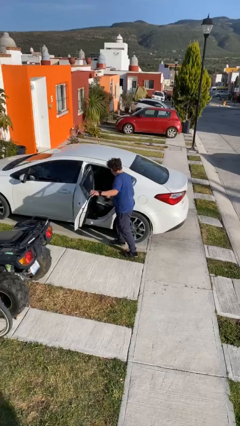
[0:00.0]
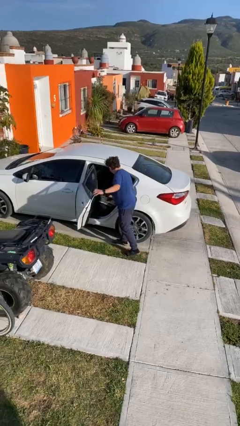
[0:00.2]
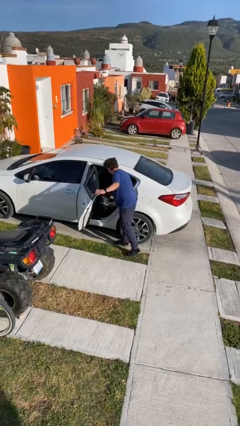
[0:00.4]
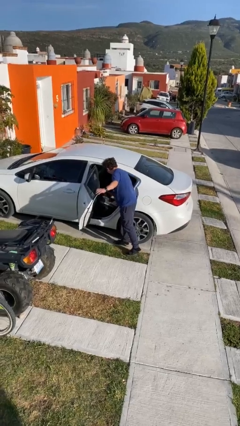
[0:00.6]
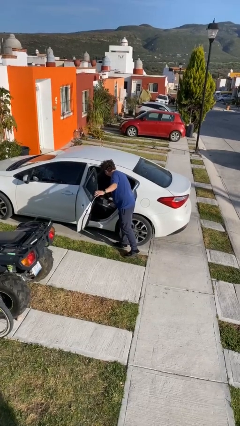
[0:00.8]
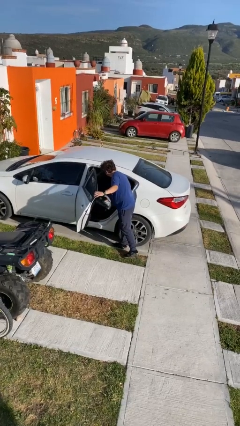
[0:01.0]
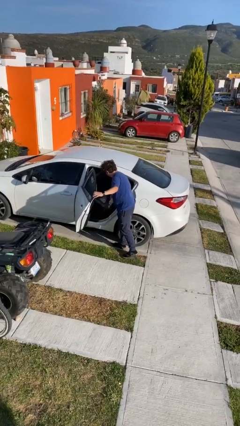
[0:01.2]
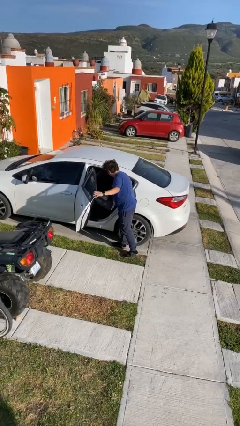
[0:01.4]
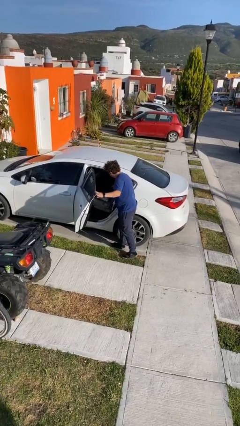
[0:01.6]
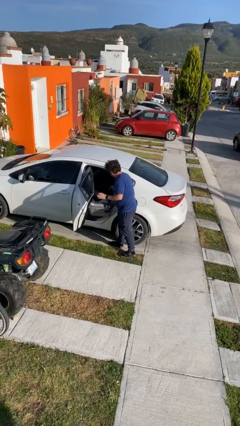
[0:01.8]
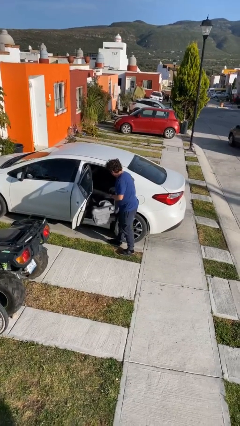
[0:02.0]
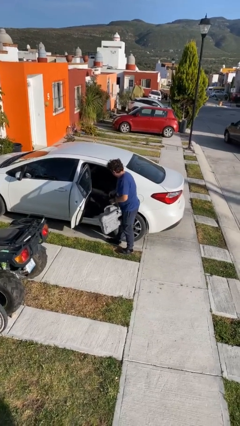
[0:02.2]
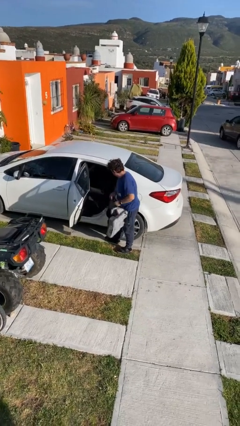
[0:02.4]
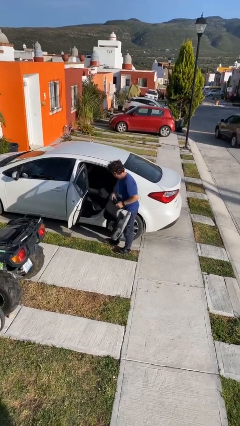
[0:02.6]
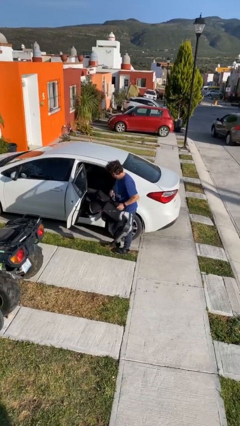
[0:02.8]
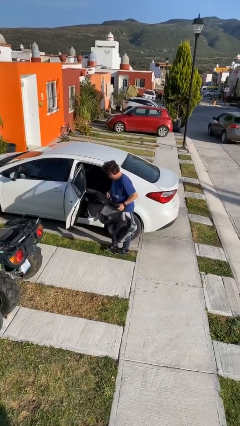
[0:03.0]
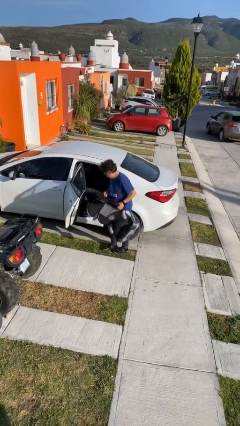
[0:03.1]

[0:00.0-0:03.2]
person unloads car

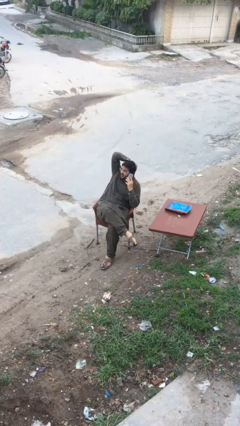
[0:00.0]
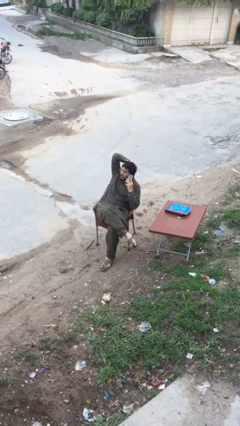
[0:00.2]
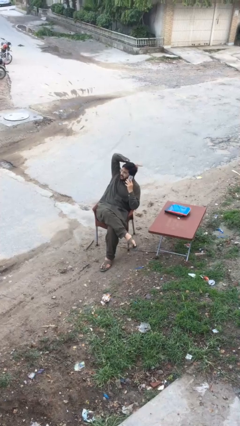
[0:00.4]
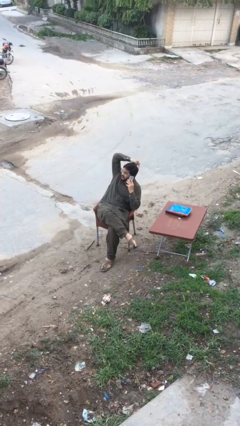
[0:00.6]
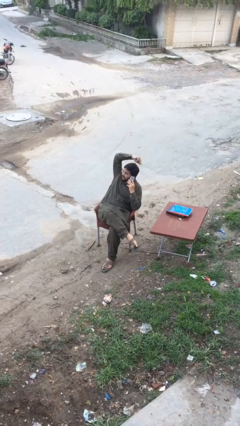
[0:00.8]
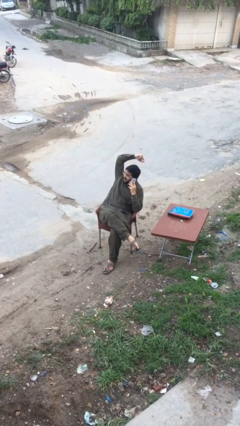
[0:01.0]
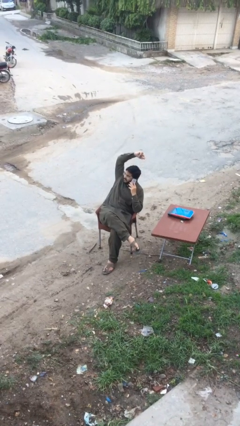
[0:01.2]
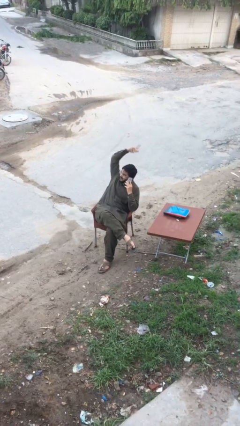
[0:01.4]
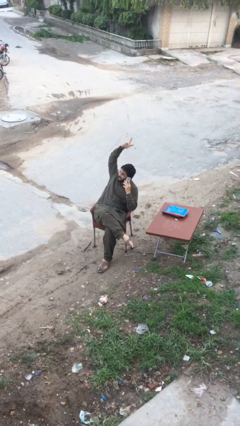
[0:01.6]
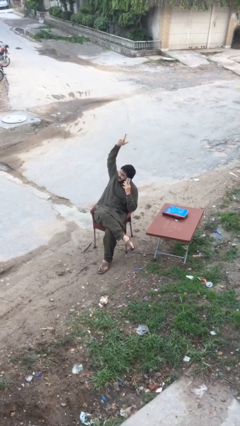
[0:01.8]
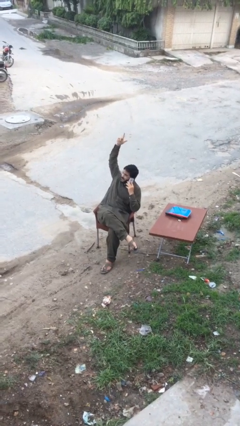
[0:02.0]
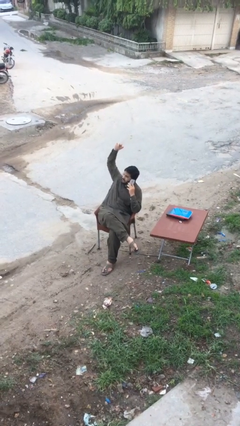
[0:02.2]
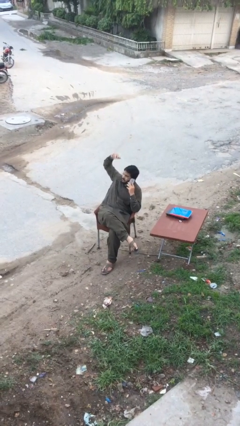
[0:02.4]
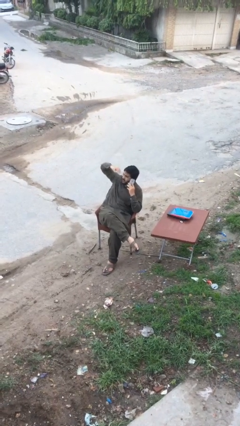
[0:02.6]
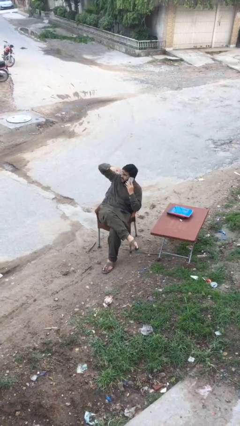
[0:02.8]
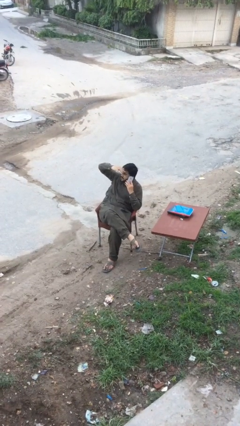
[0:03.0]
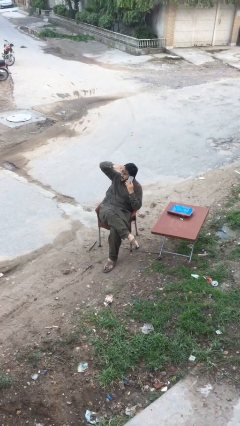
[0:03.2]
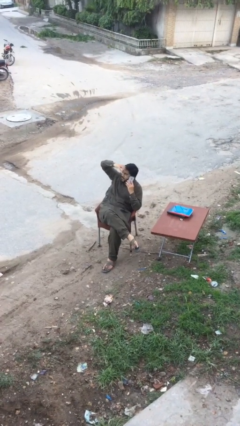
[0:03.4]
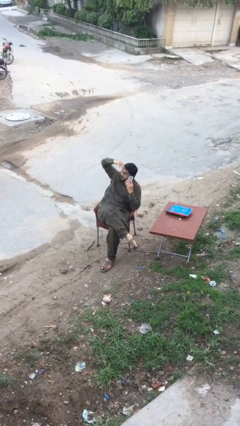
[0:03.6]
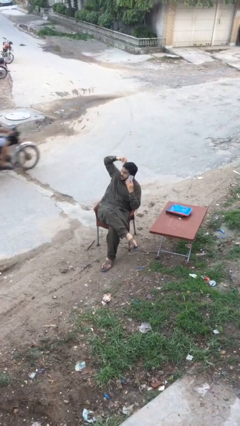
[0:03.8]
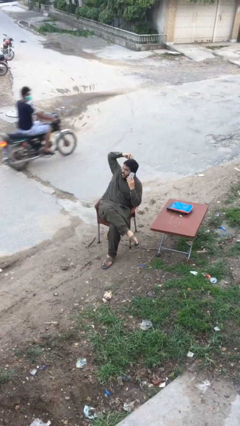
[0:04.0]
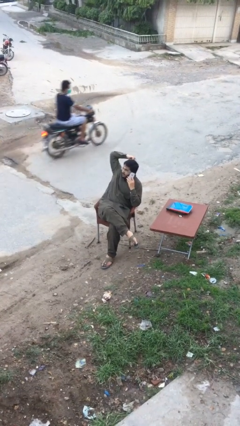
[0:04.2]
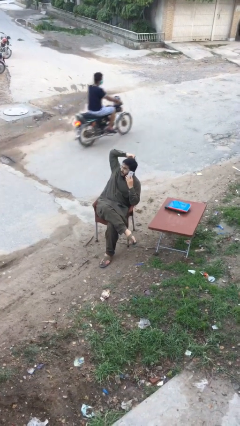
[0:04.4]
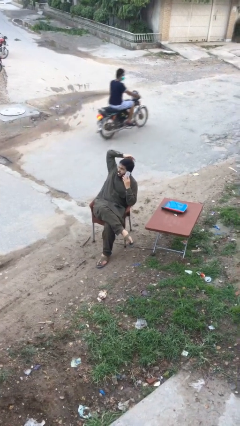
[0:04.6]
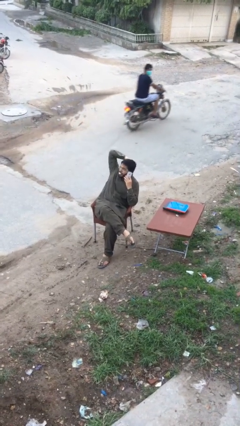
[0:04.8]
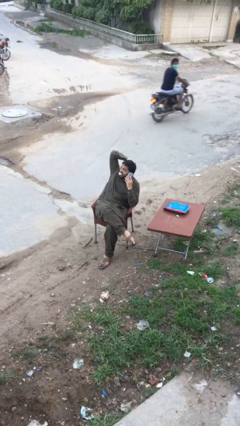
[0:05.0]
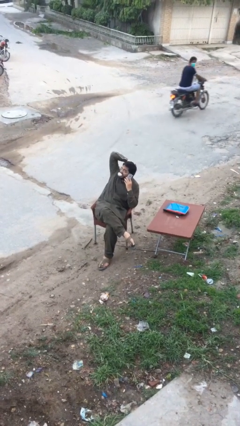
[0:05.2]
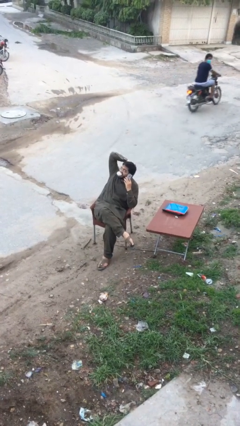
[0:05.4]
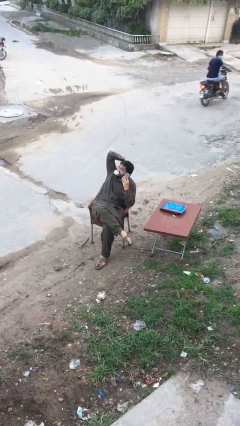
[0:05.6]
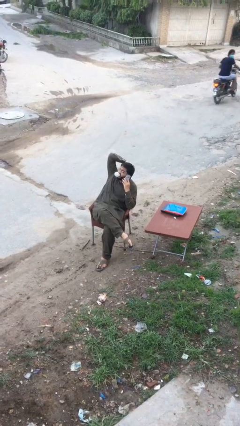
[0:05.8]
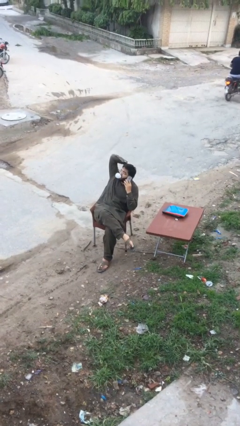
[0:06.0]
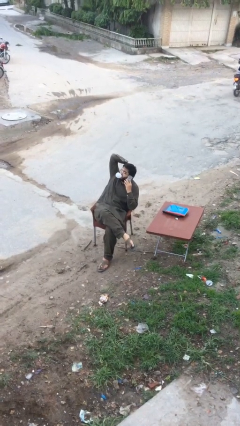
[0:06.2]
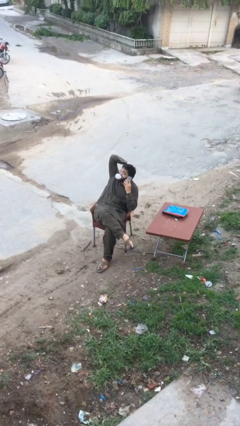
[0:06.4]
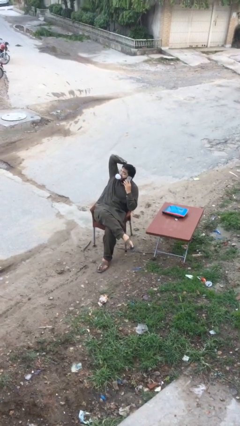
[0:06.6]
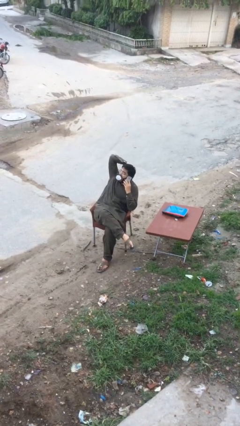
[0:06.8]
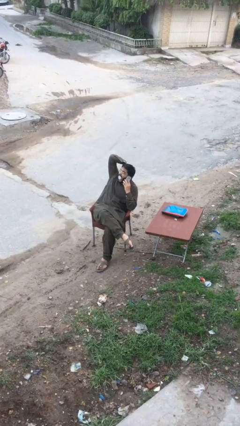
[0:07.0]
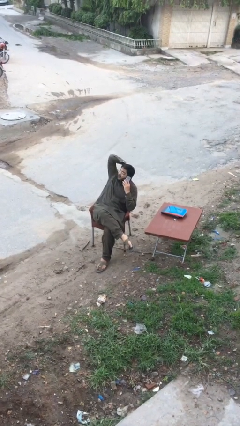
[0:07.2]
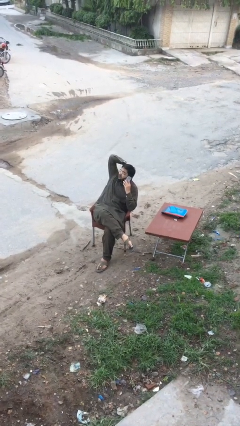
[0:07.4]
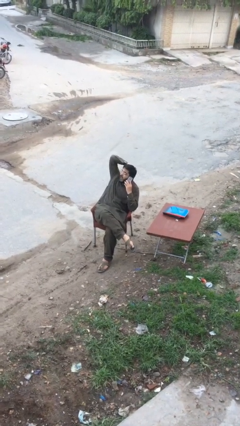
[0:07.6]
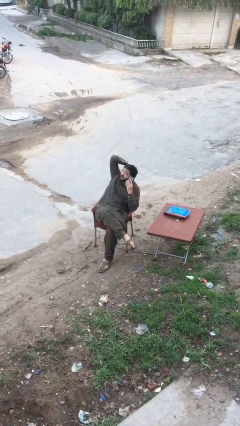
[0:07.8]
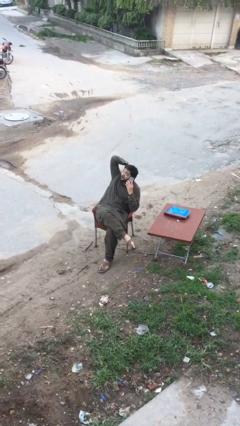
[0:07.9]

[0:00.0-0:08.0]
person talks on phone

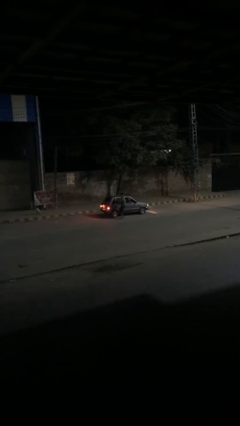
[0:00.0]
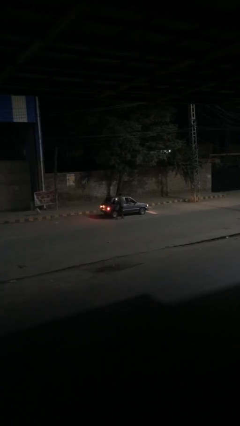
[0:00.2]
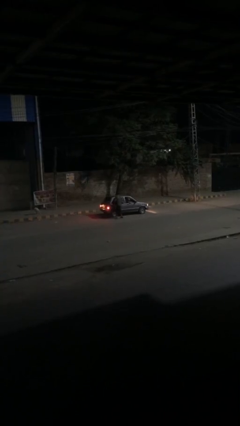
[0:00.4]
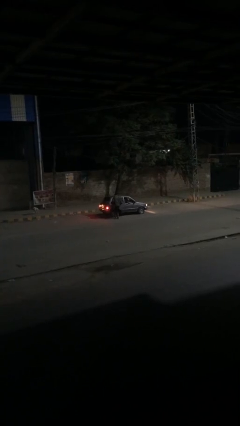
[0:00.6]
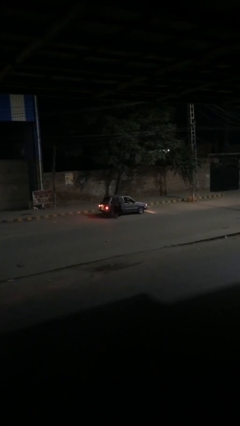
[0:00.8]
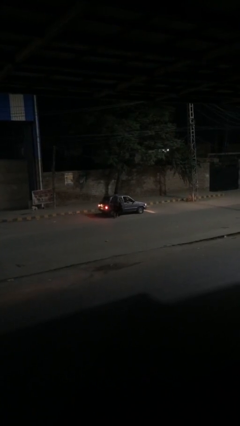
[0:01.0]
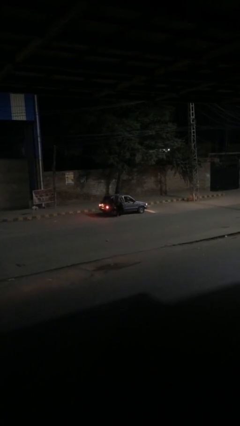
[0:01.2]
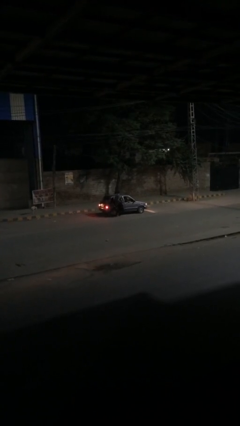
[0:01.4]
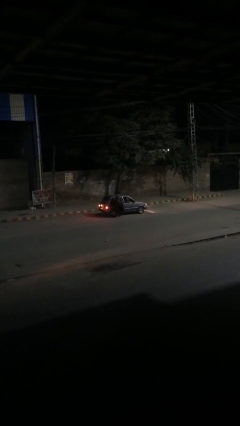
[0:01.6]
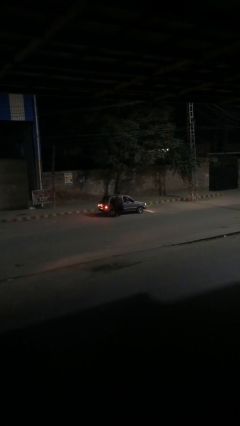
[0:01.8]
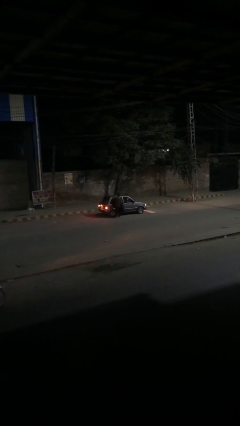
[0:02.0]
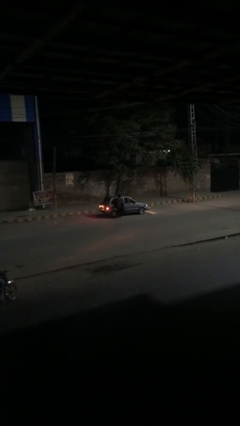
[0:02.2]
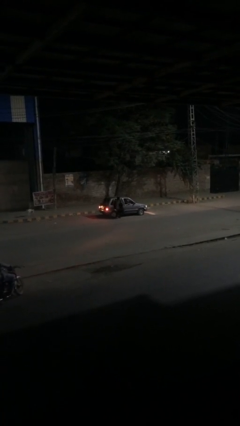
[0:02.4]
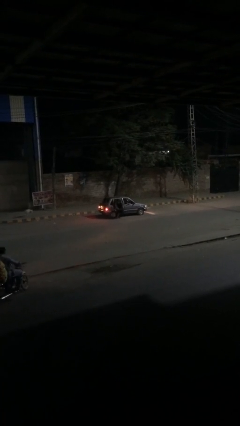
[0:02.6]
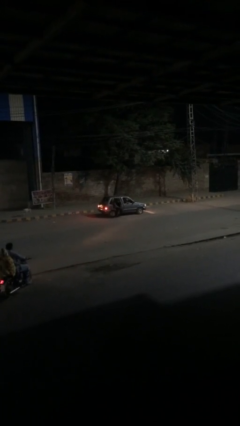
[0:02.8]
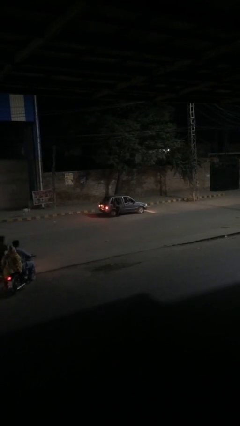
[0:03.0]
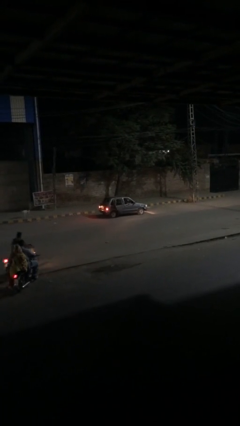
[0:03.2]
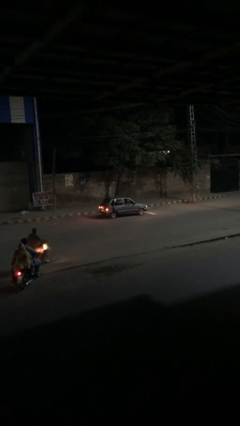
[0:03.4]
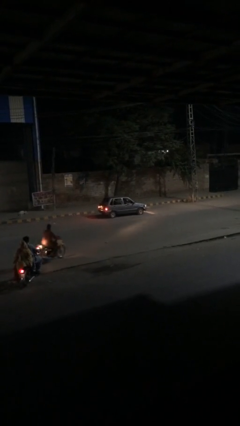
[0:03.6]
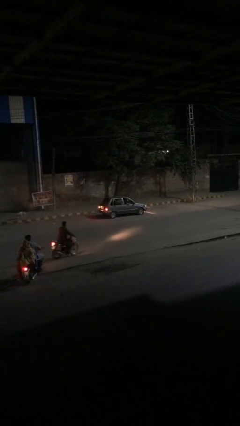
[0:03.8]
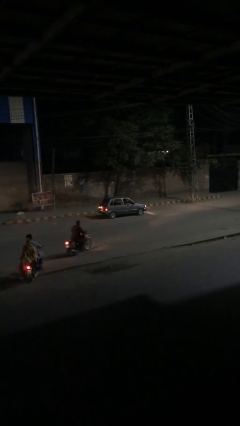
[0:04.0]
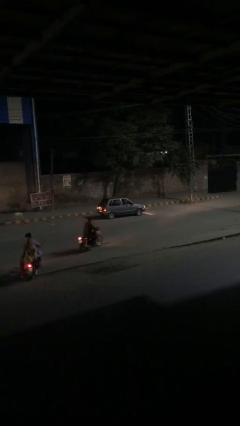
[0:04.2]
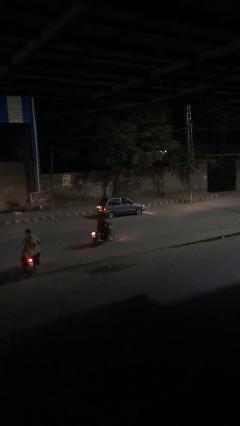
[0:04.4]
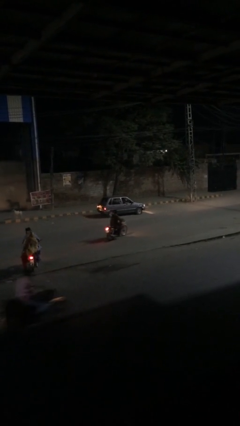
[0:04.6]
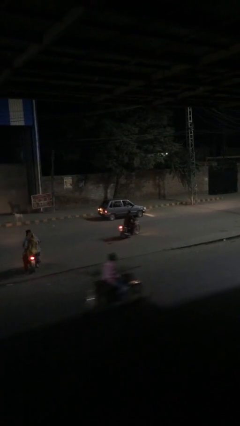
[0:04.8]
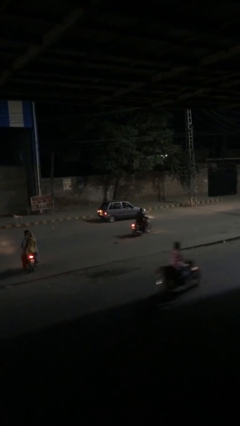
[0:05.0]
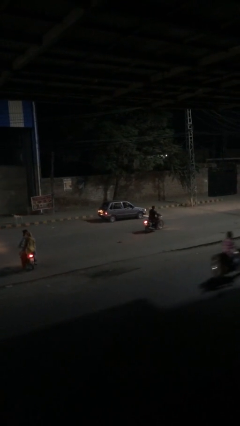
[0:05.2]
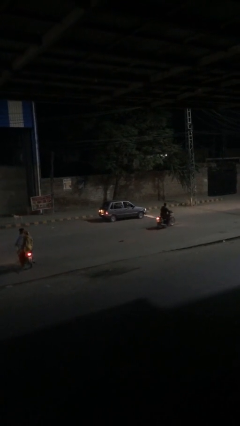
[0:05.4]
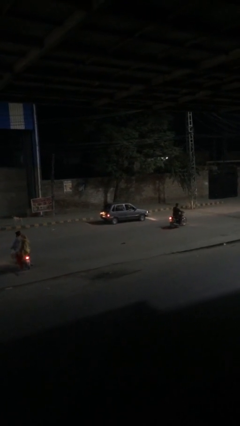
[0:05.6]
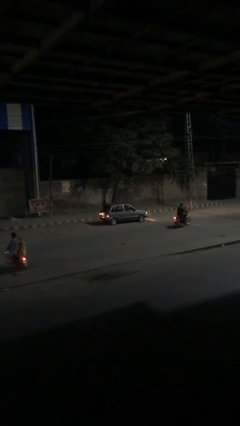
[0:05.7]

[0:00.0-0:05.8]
car picks up person

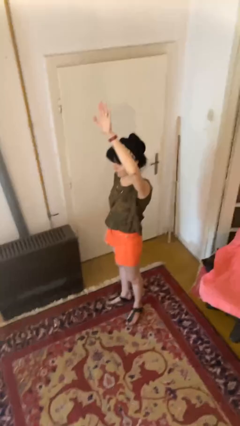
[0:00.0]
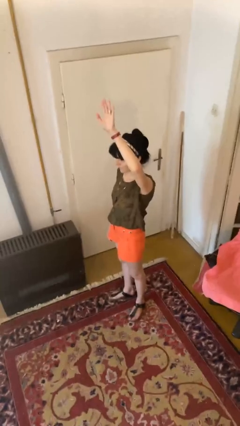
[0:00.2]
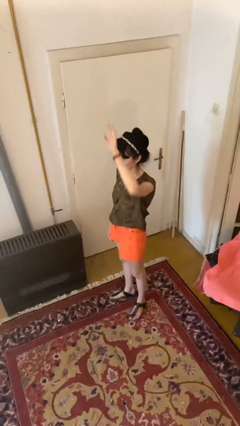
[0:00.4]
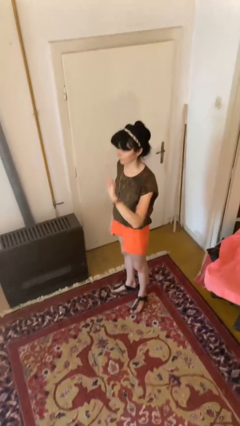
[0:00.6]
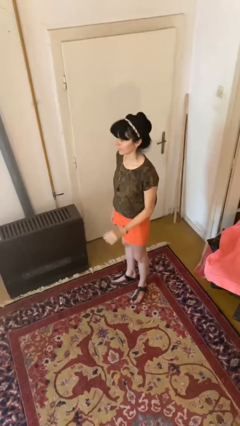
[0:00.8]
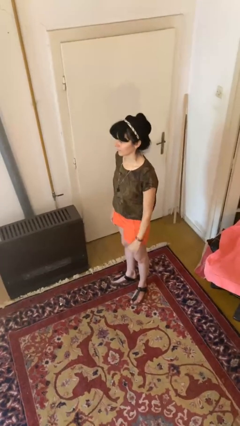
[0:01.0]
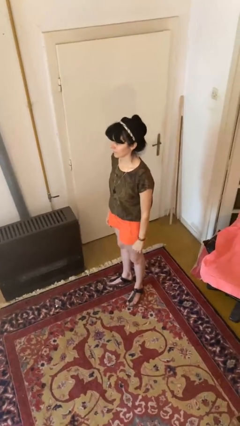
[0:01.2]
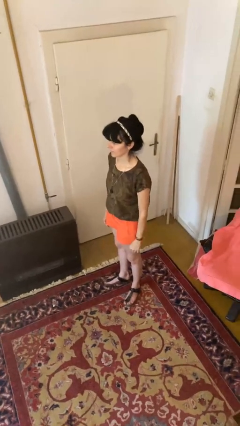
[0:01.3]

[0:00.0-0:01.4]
person gestures lower hand
